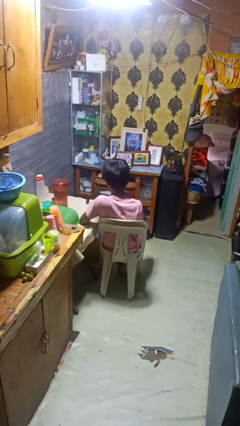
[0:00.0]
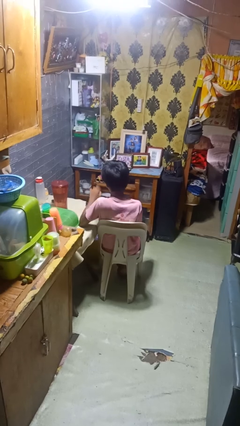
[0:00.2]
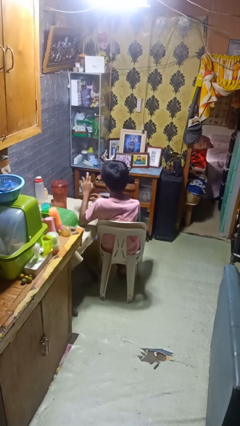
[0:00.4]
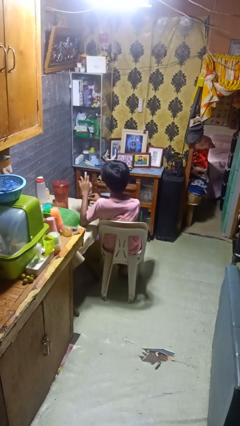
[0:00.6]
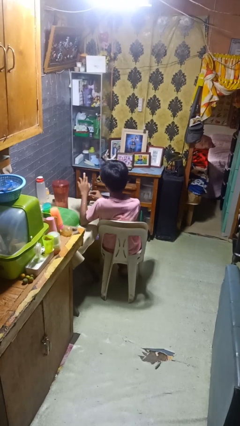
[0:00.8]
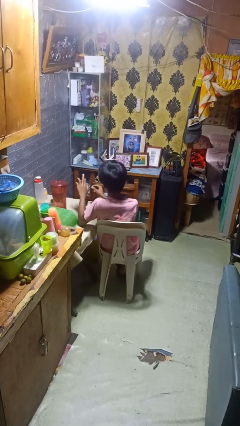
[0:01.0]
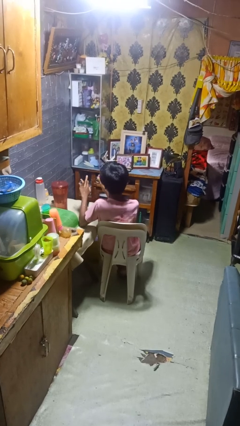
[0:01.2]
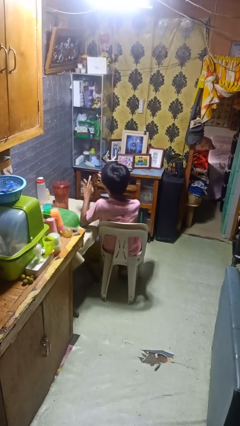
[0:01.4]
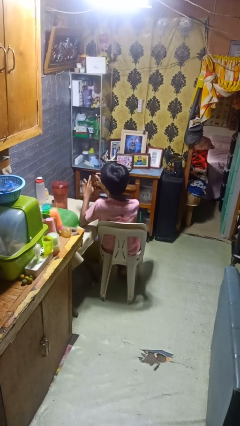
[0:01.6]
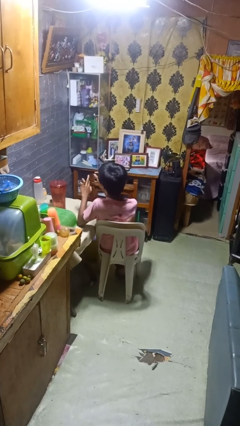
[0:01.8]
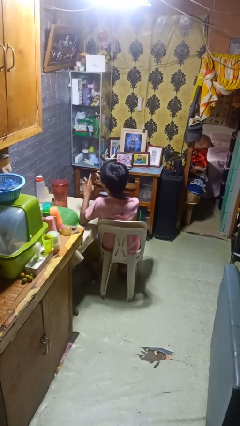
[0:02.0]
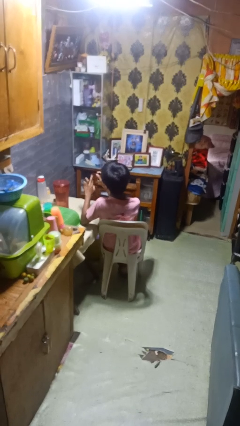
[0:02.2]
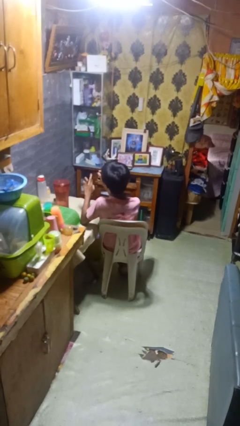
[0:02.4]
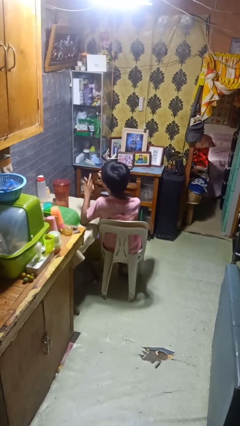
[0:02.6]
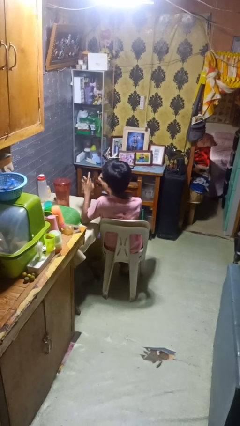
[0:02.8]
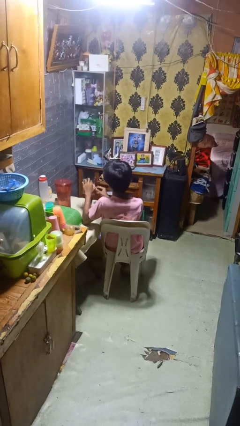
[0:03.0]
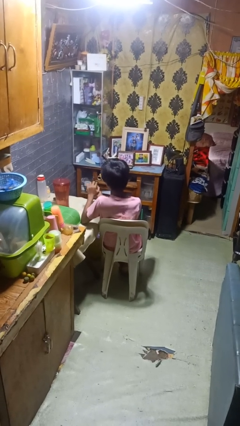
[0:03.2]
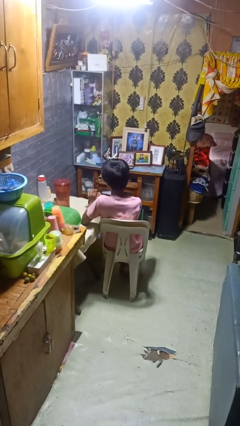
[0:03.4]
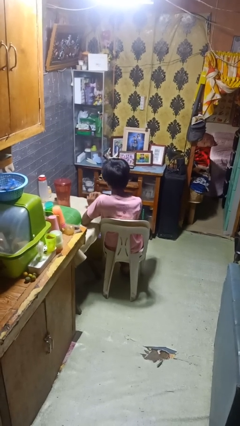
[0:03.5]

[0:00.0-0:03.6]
person paints fingernails

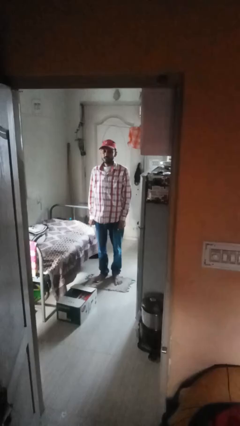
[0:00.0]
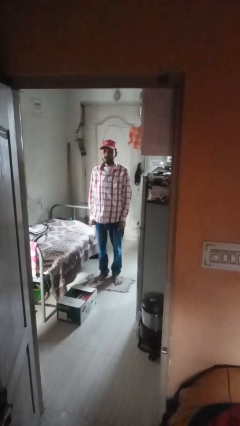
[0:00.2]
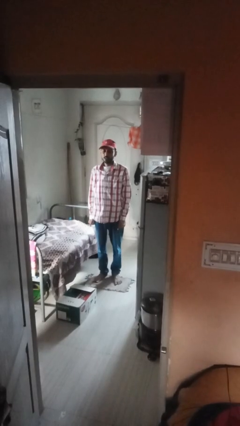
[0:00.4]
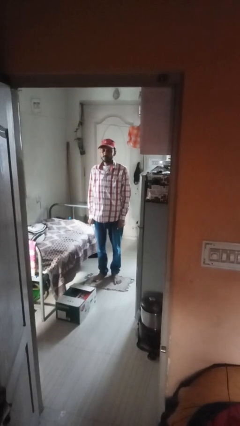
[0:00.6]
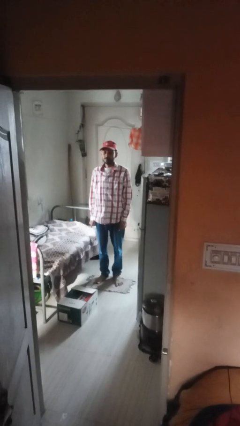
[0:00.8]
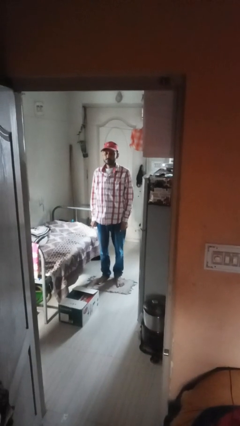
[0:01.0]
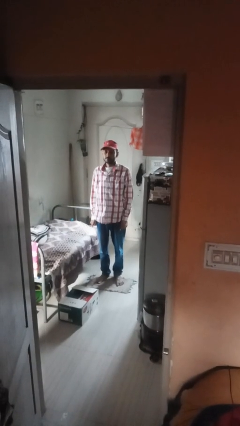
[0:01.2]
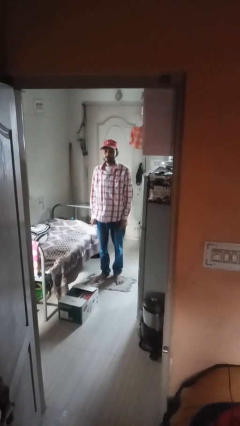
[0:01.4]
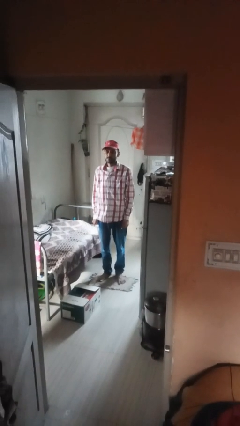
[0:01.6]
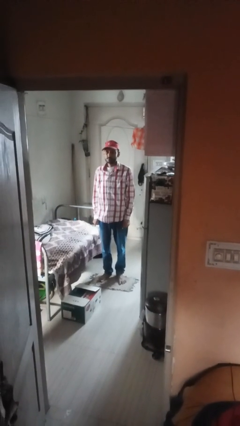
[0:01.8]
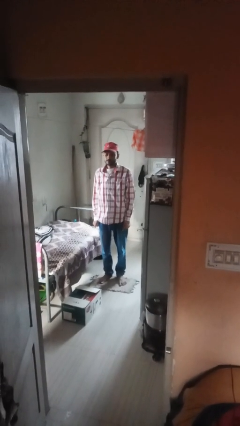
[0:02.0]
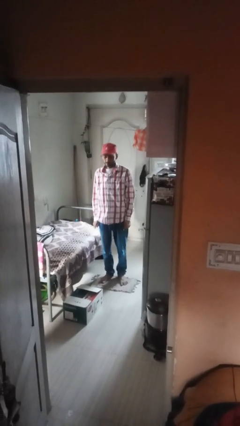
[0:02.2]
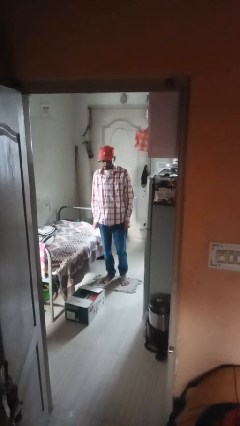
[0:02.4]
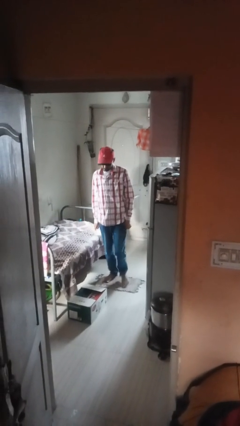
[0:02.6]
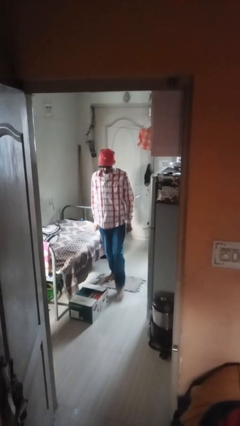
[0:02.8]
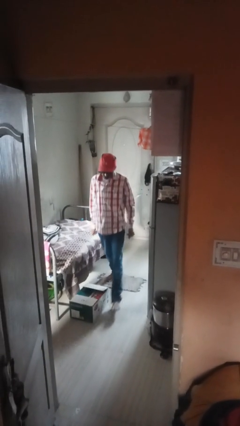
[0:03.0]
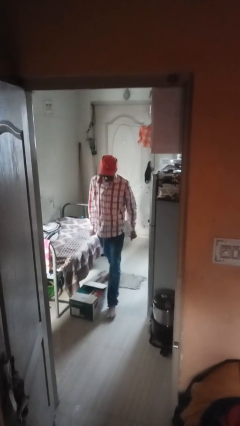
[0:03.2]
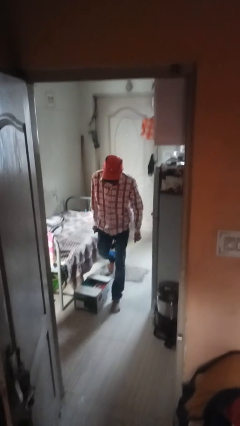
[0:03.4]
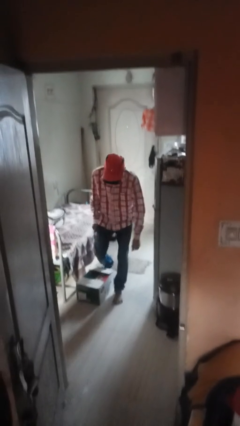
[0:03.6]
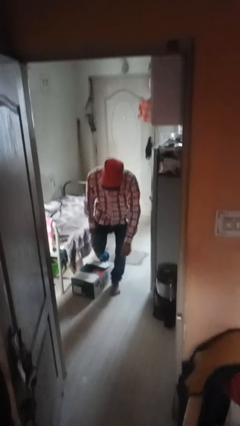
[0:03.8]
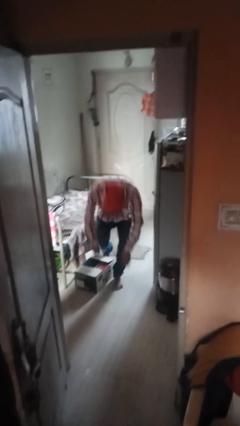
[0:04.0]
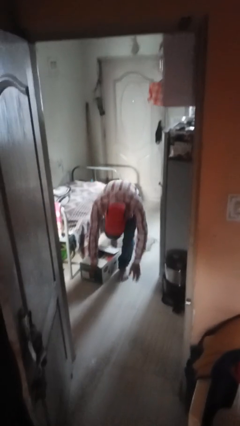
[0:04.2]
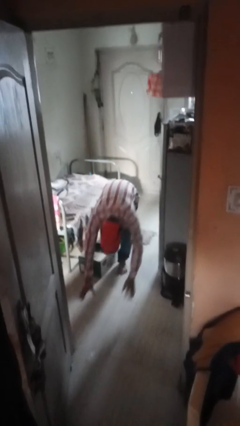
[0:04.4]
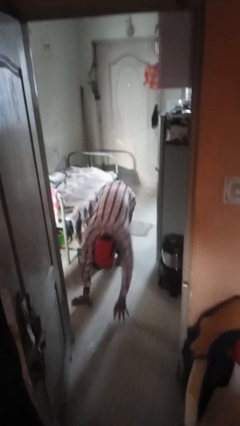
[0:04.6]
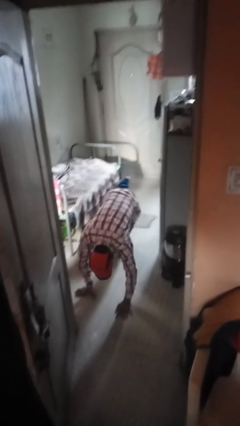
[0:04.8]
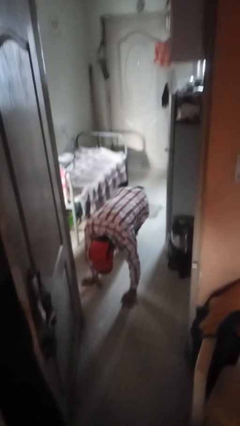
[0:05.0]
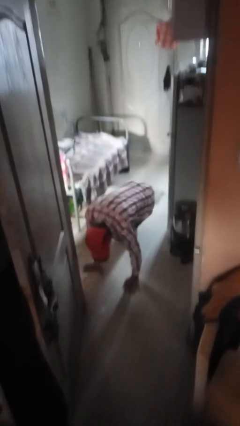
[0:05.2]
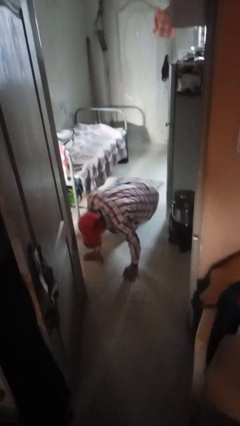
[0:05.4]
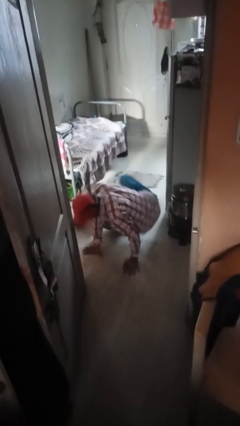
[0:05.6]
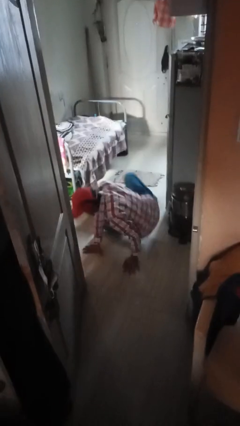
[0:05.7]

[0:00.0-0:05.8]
person trips on object on floor

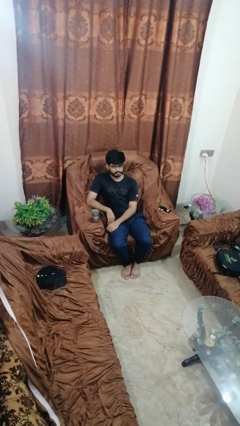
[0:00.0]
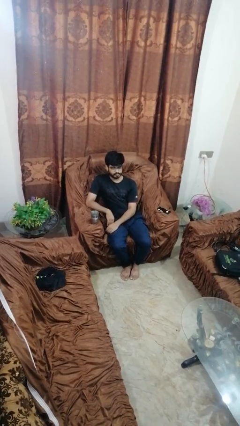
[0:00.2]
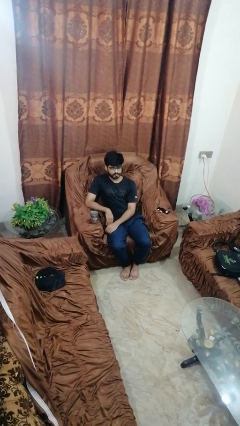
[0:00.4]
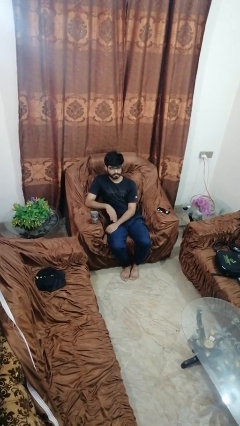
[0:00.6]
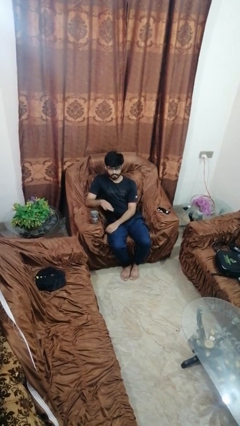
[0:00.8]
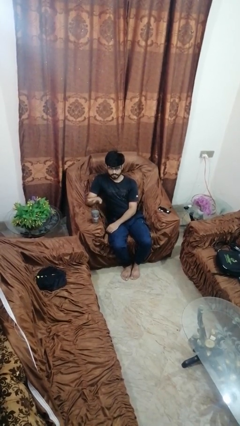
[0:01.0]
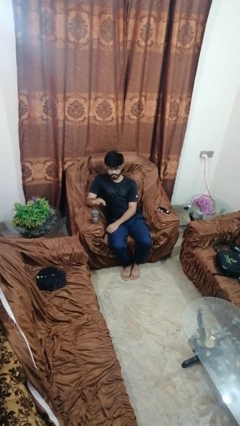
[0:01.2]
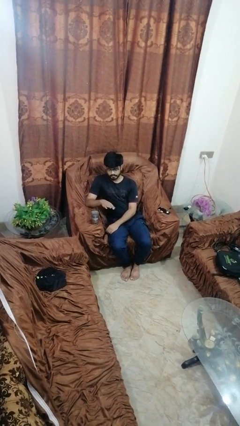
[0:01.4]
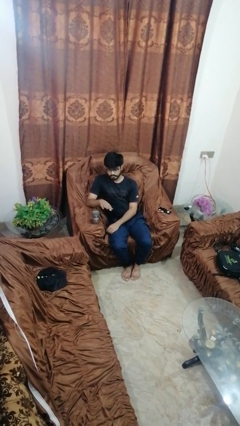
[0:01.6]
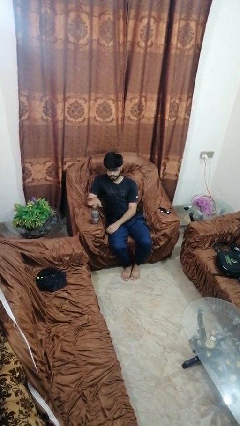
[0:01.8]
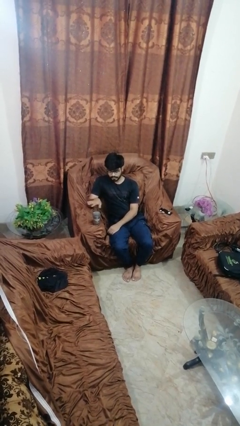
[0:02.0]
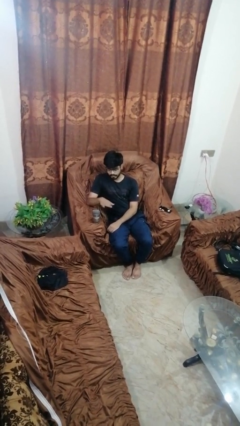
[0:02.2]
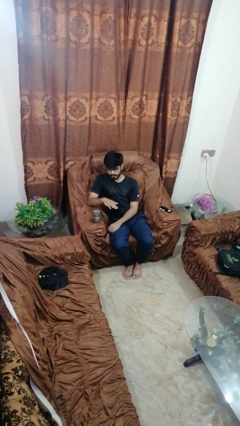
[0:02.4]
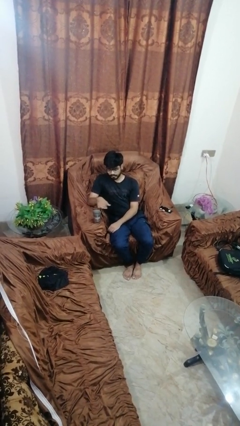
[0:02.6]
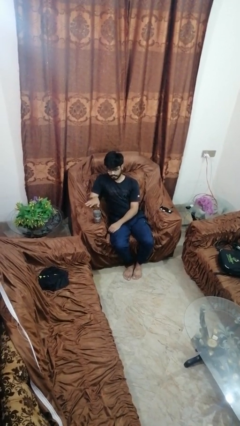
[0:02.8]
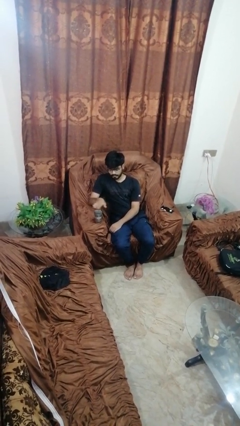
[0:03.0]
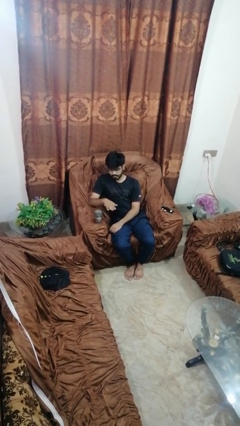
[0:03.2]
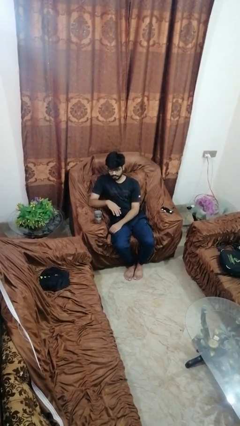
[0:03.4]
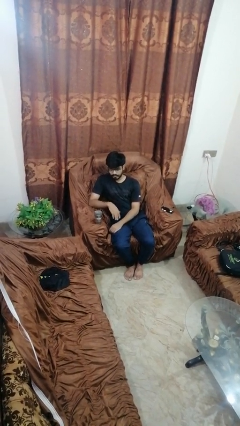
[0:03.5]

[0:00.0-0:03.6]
person waves hand over object

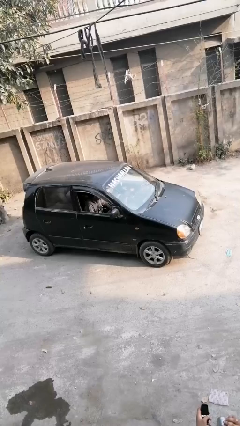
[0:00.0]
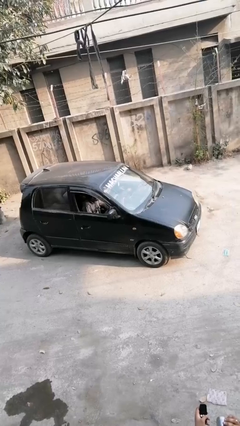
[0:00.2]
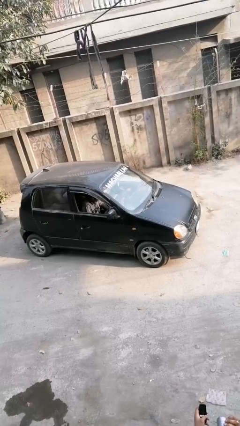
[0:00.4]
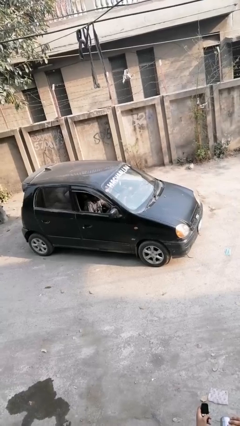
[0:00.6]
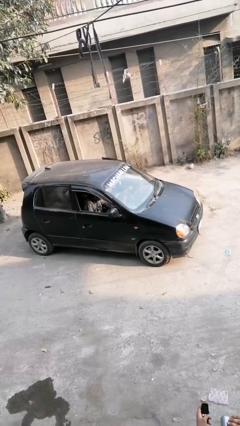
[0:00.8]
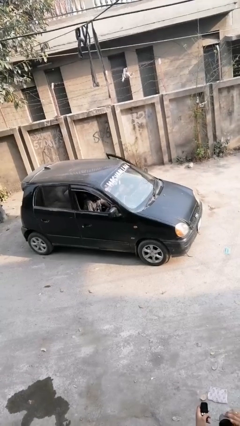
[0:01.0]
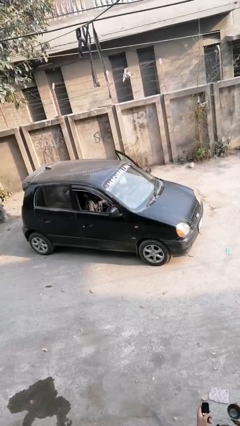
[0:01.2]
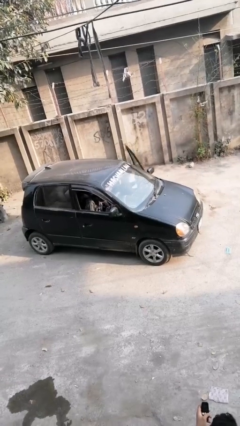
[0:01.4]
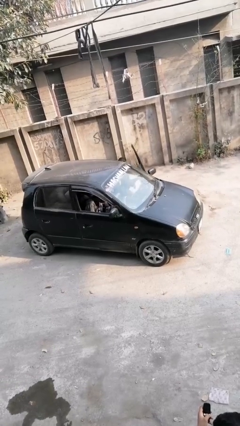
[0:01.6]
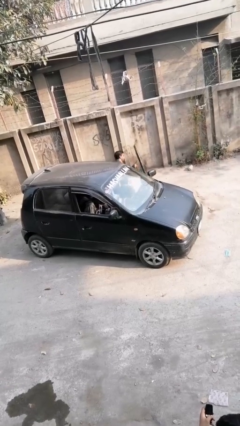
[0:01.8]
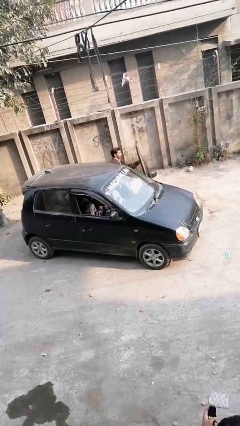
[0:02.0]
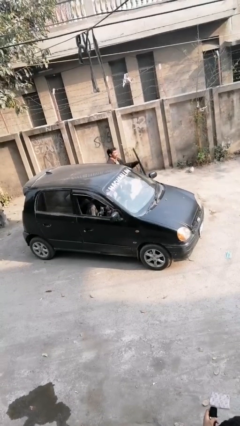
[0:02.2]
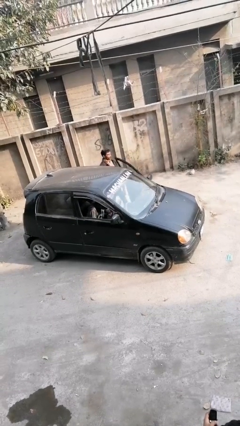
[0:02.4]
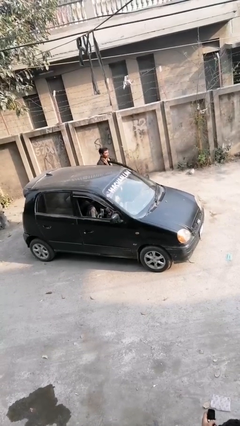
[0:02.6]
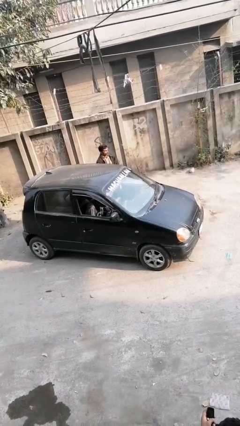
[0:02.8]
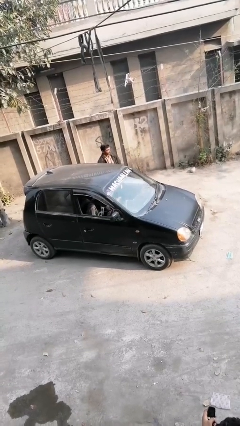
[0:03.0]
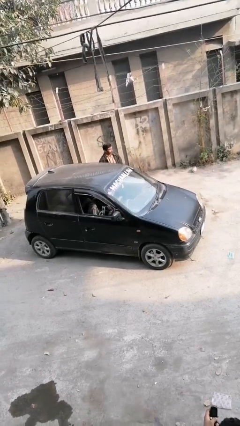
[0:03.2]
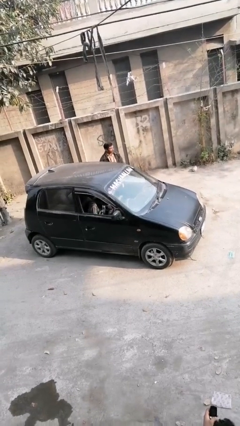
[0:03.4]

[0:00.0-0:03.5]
car drops off person

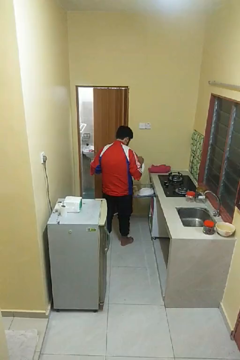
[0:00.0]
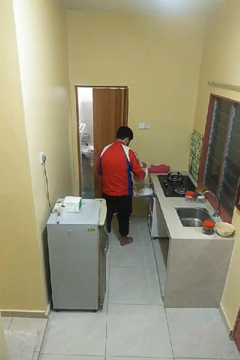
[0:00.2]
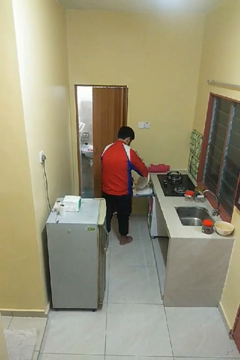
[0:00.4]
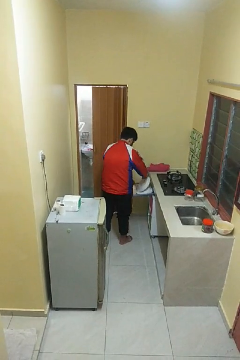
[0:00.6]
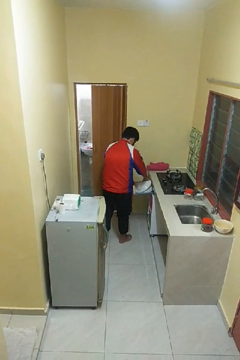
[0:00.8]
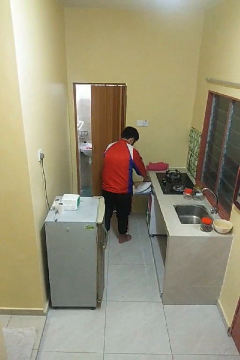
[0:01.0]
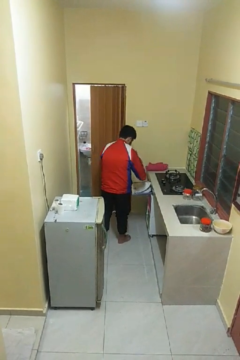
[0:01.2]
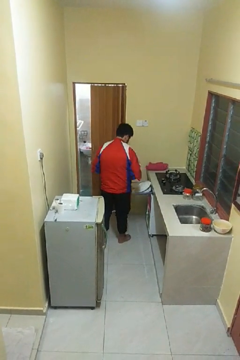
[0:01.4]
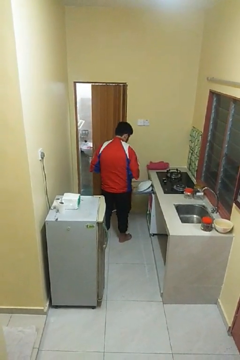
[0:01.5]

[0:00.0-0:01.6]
person puts object into kitchen drawer
